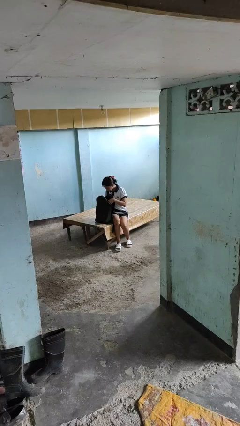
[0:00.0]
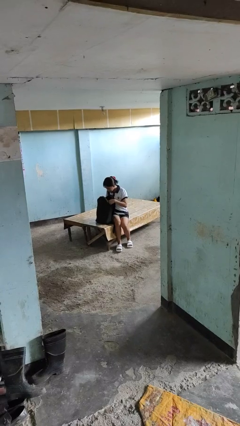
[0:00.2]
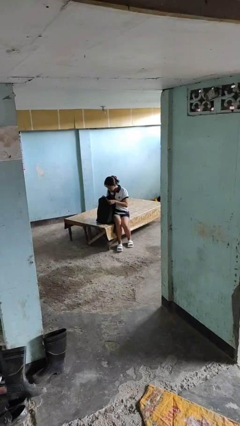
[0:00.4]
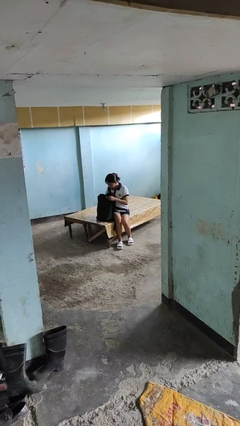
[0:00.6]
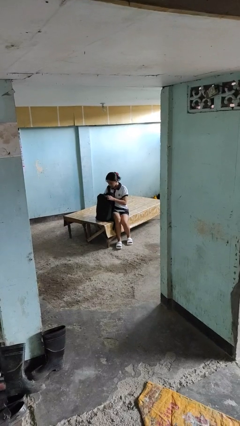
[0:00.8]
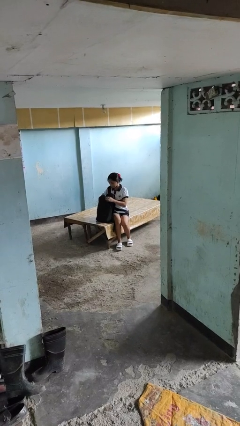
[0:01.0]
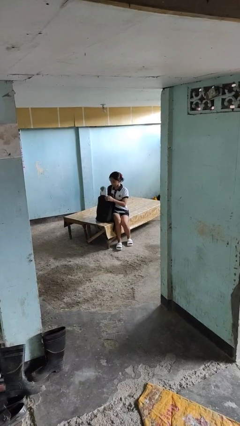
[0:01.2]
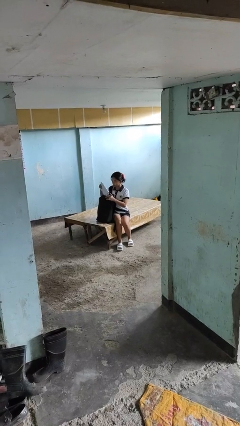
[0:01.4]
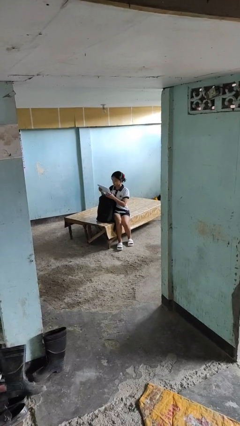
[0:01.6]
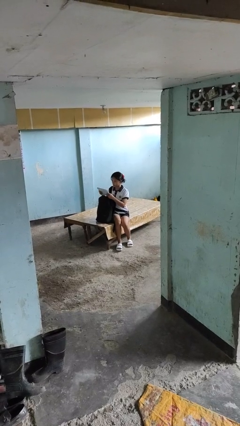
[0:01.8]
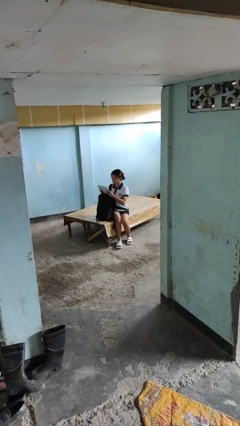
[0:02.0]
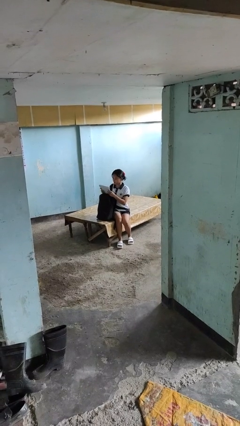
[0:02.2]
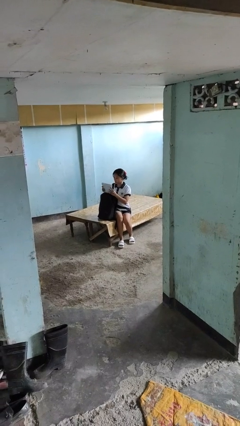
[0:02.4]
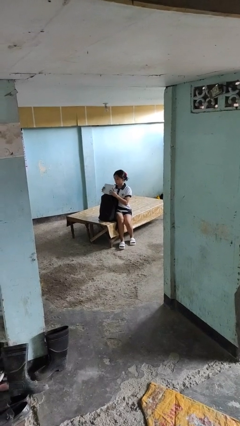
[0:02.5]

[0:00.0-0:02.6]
person takes object from backpack

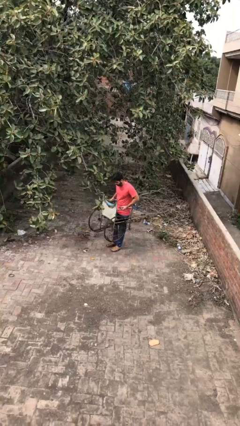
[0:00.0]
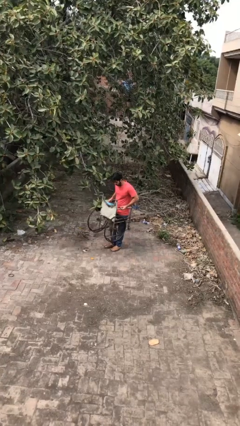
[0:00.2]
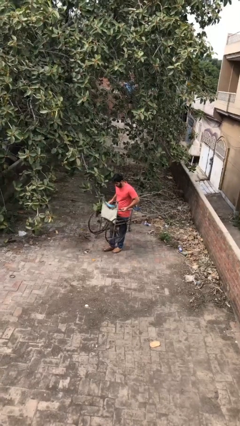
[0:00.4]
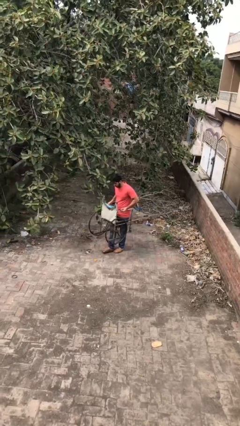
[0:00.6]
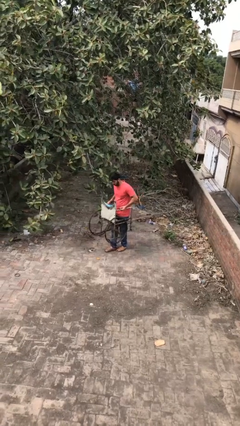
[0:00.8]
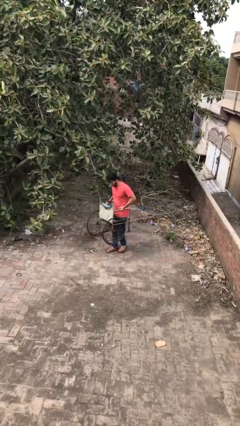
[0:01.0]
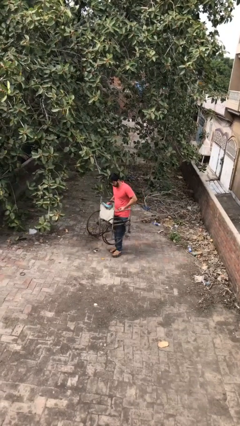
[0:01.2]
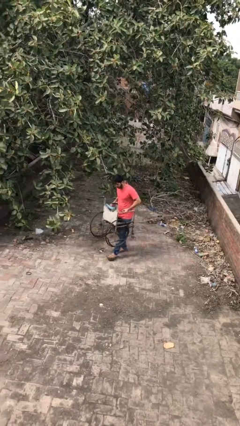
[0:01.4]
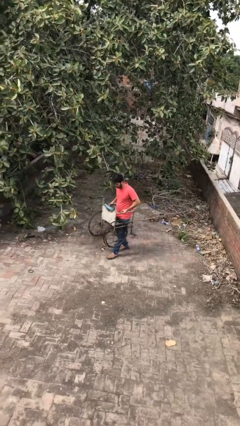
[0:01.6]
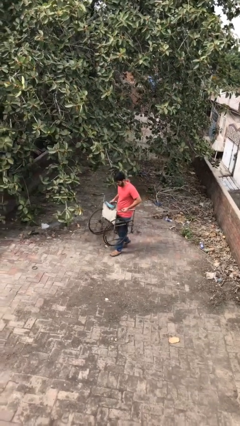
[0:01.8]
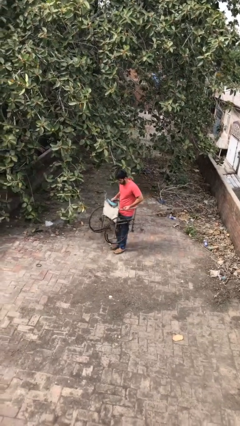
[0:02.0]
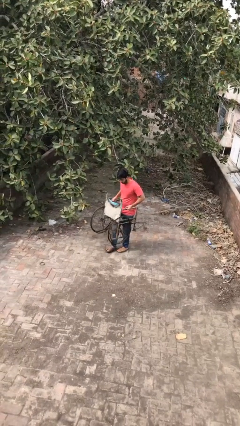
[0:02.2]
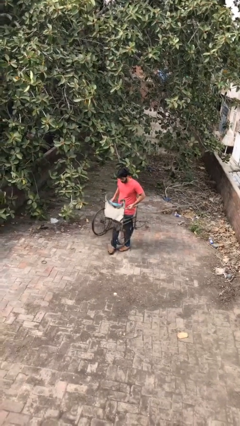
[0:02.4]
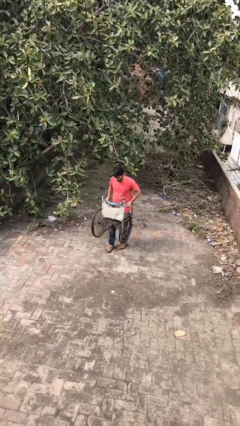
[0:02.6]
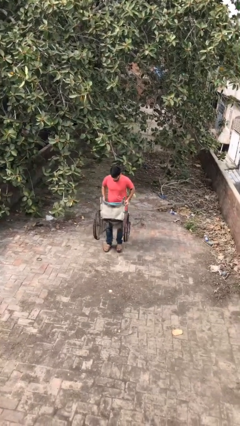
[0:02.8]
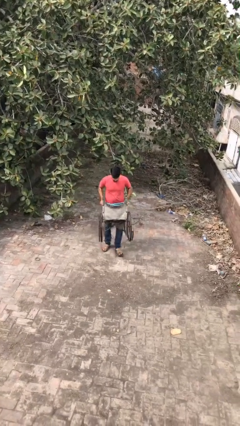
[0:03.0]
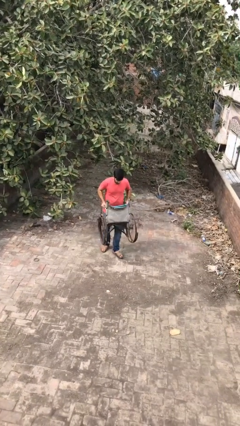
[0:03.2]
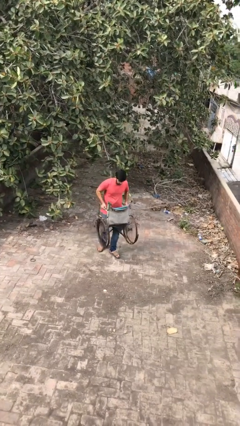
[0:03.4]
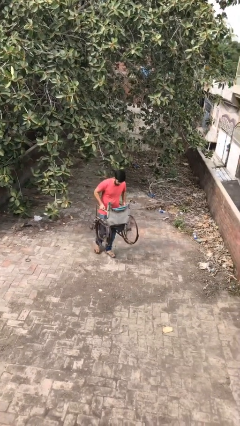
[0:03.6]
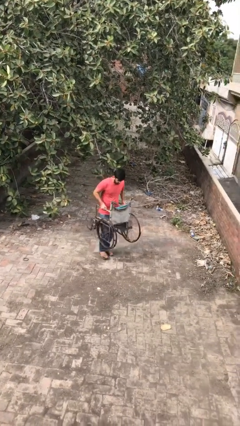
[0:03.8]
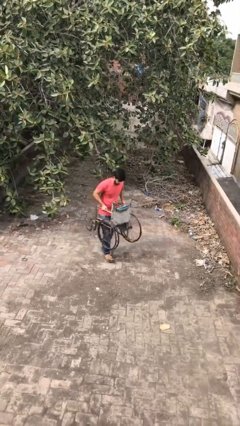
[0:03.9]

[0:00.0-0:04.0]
person carries heavy object

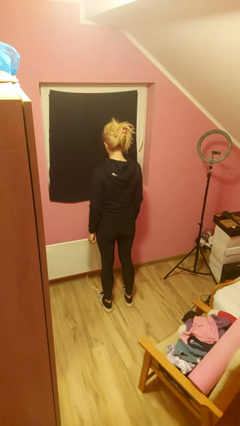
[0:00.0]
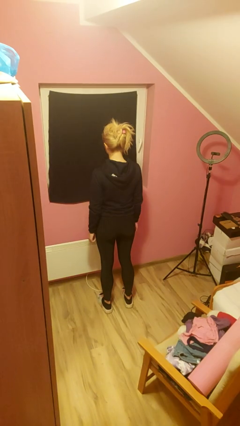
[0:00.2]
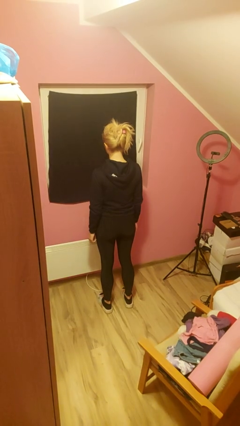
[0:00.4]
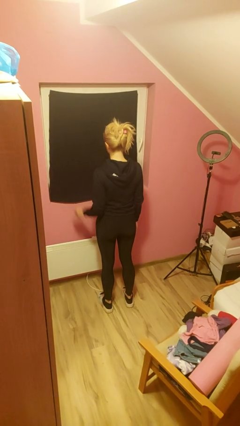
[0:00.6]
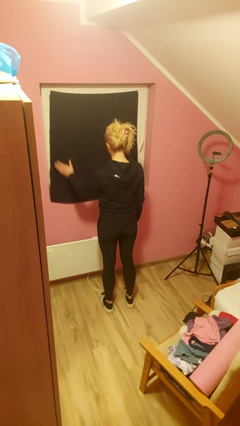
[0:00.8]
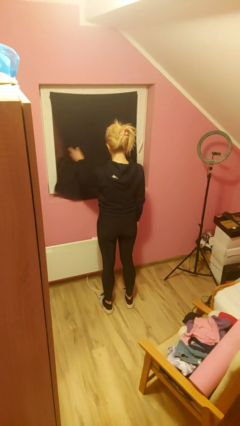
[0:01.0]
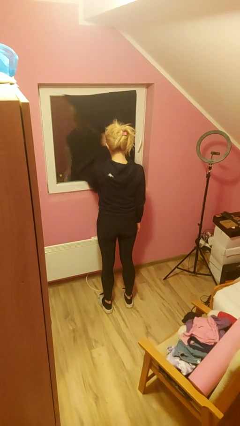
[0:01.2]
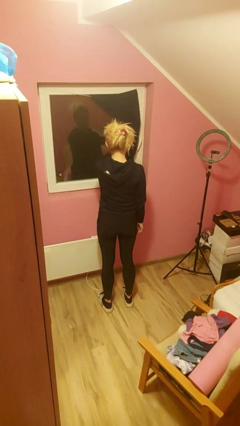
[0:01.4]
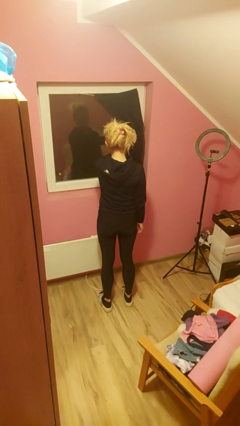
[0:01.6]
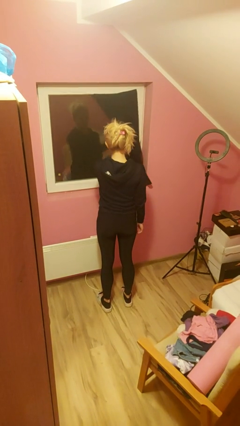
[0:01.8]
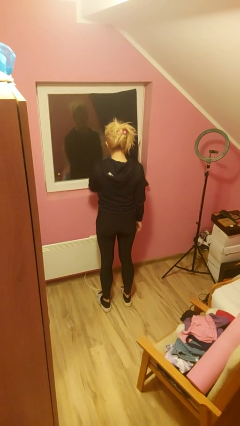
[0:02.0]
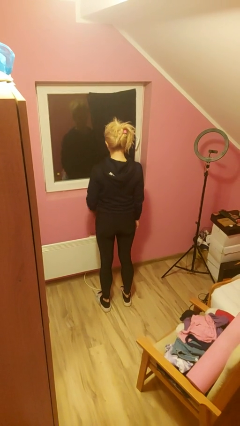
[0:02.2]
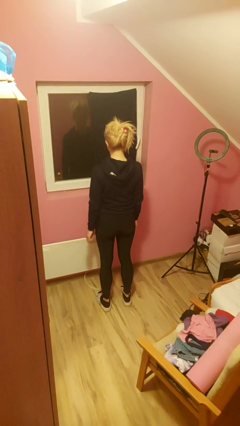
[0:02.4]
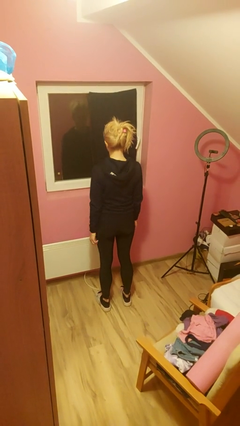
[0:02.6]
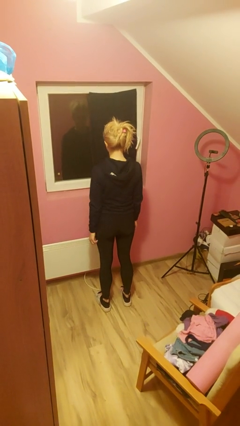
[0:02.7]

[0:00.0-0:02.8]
person opens curtains

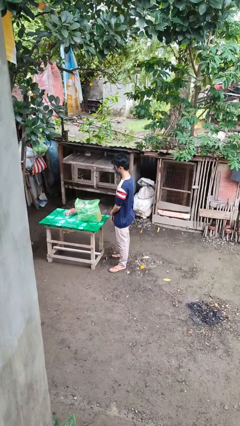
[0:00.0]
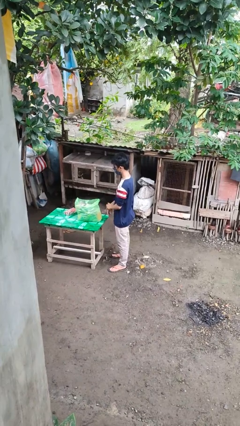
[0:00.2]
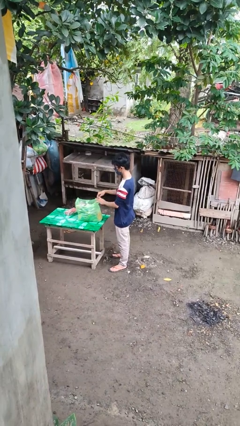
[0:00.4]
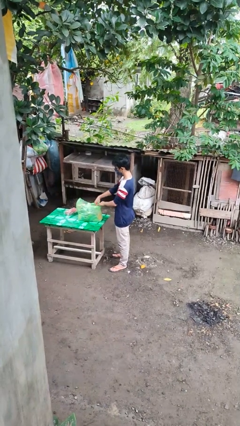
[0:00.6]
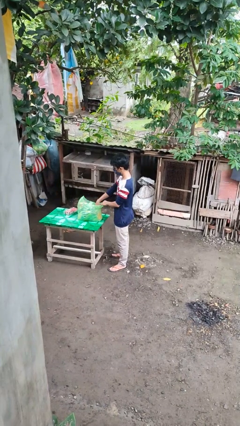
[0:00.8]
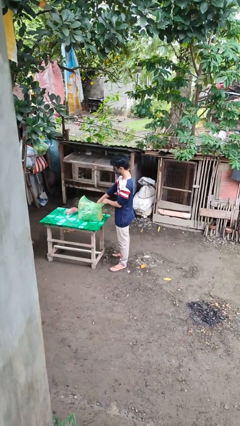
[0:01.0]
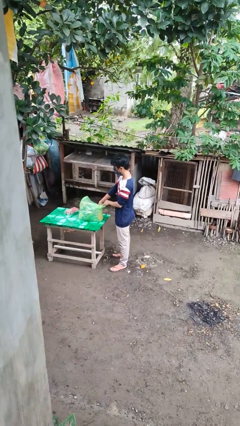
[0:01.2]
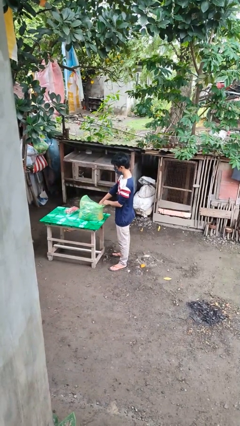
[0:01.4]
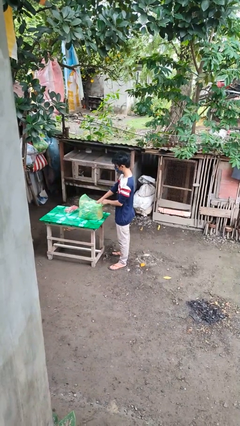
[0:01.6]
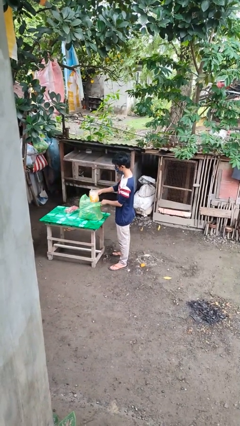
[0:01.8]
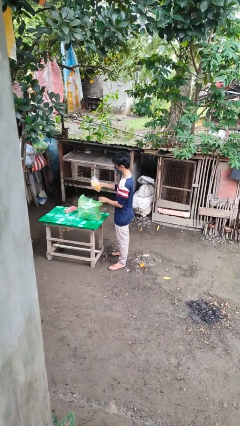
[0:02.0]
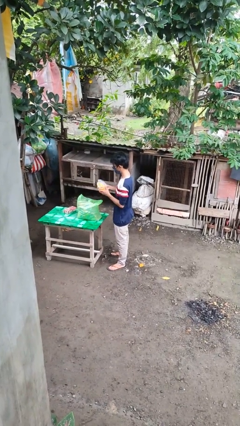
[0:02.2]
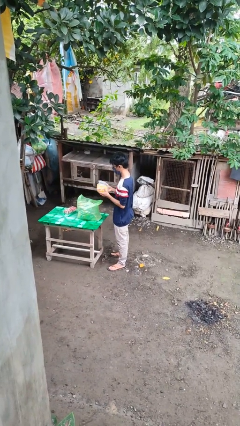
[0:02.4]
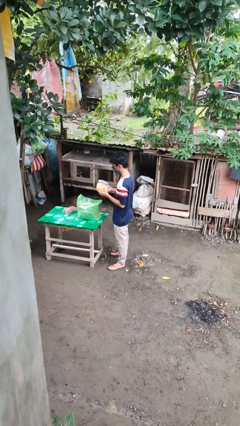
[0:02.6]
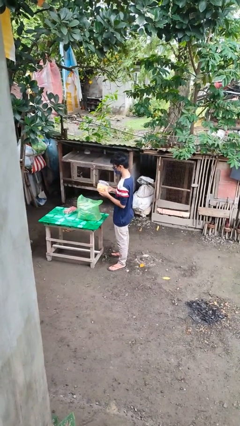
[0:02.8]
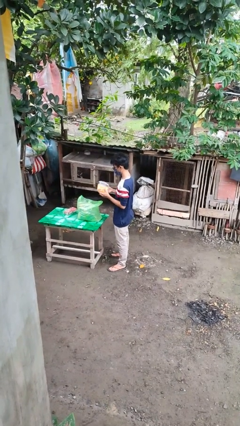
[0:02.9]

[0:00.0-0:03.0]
person takes object from bag

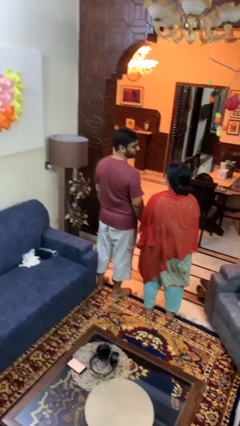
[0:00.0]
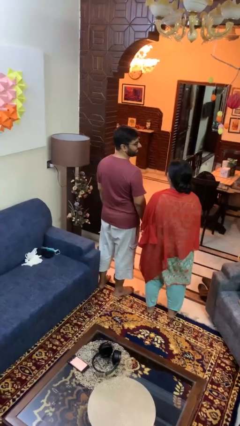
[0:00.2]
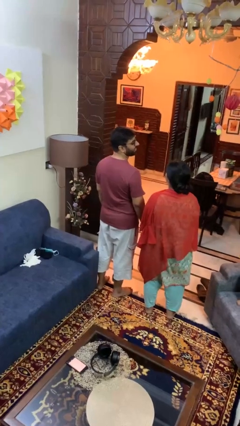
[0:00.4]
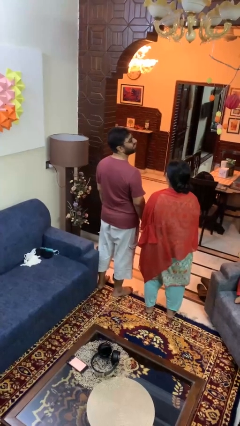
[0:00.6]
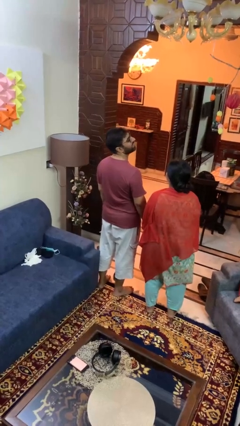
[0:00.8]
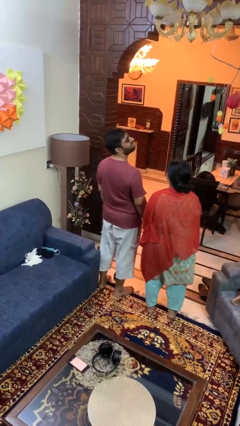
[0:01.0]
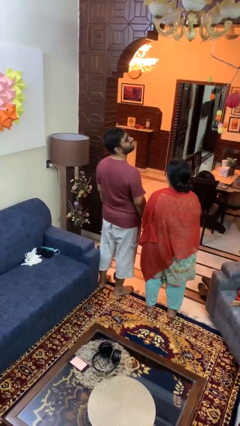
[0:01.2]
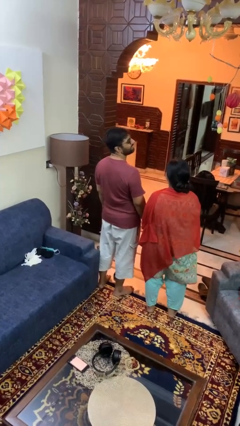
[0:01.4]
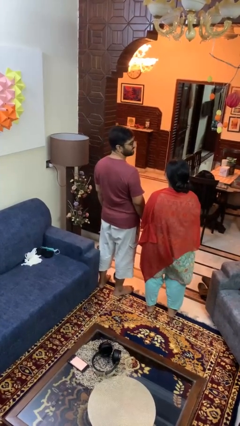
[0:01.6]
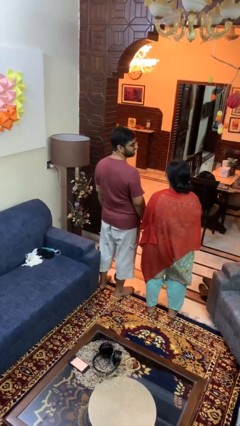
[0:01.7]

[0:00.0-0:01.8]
person laughs with person

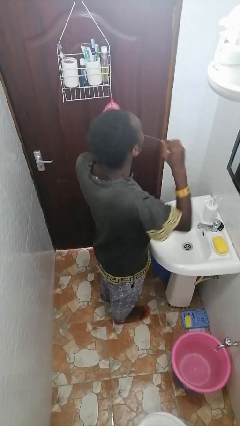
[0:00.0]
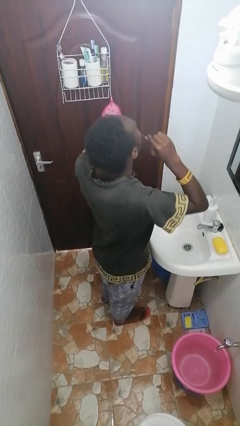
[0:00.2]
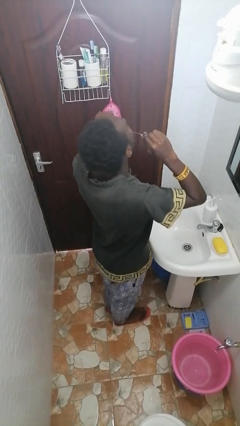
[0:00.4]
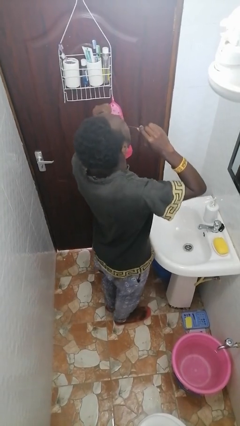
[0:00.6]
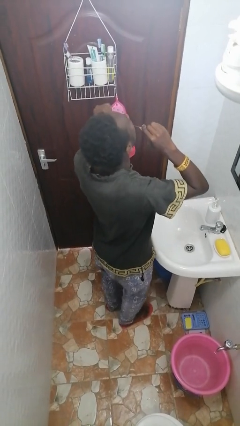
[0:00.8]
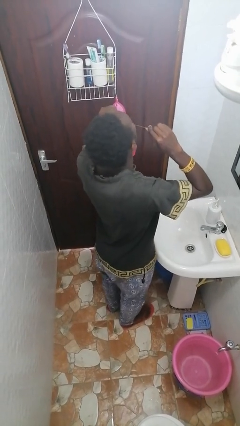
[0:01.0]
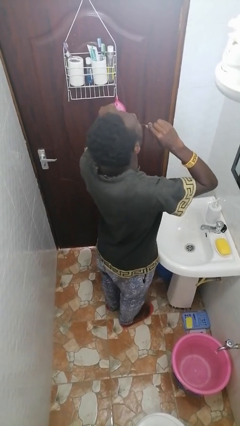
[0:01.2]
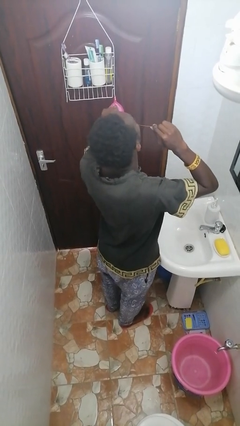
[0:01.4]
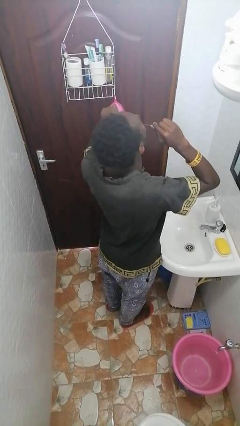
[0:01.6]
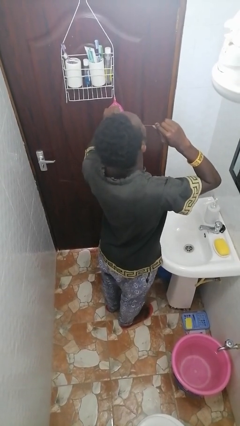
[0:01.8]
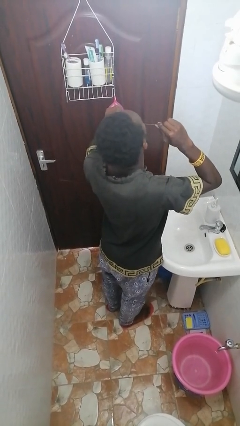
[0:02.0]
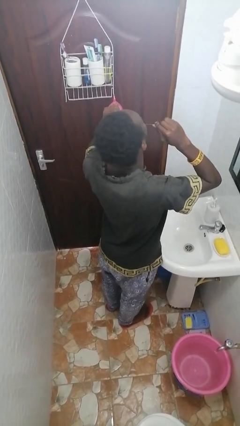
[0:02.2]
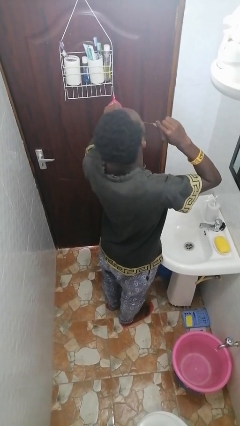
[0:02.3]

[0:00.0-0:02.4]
person flosses

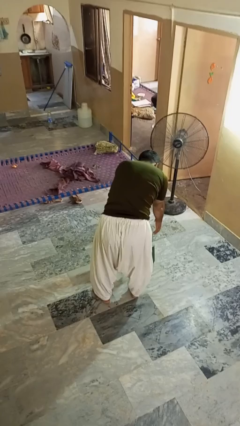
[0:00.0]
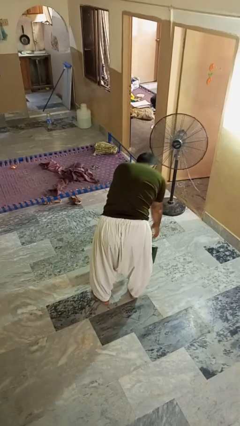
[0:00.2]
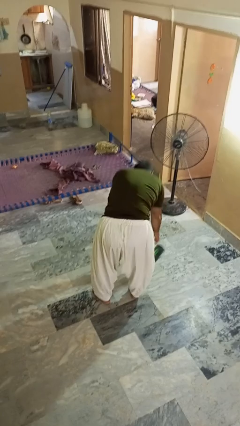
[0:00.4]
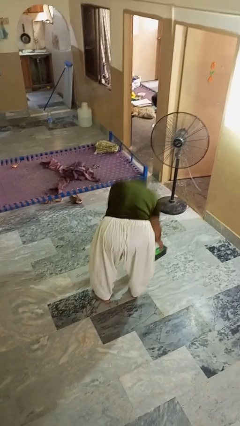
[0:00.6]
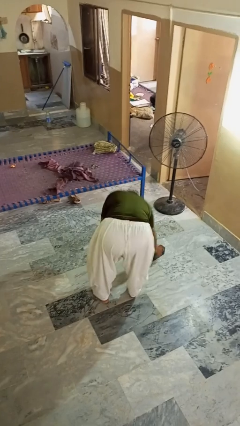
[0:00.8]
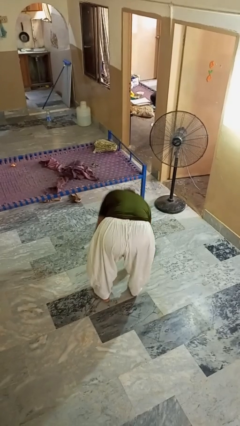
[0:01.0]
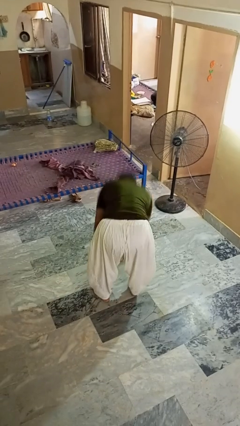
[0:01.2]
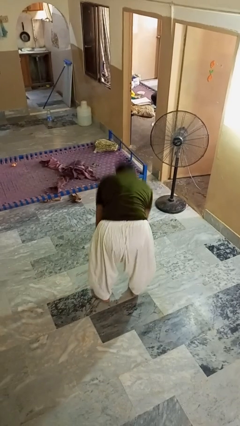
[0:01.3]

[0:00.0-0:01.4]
person picks up object from floor
